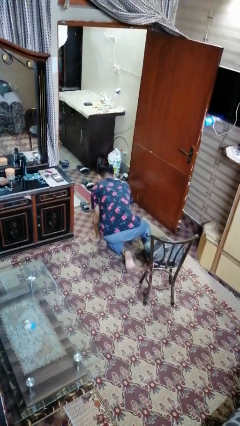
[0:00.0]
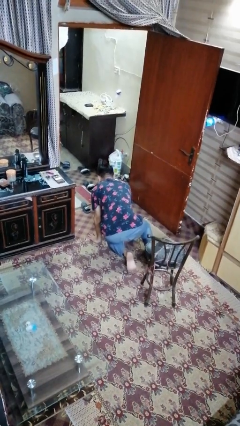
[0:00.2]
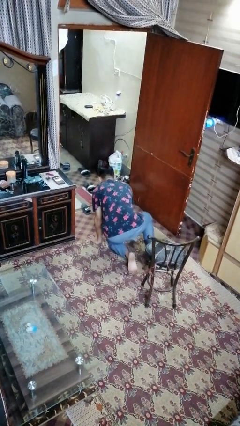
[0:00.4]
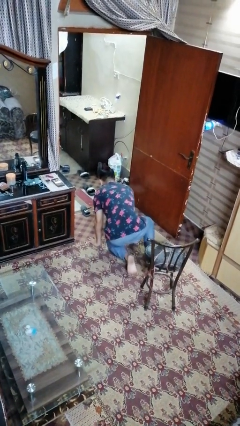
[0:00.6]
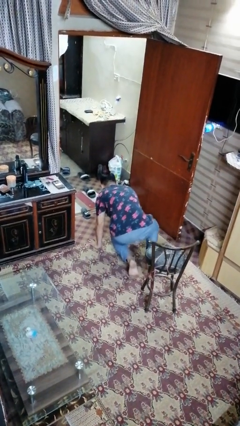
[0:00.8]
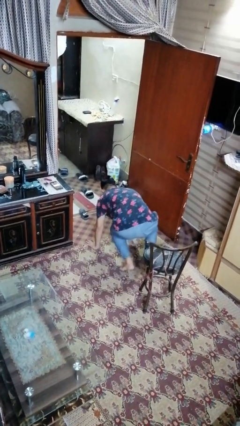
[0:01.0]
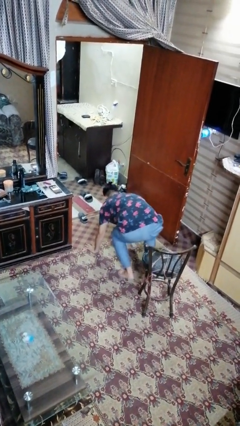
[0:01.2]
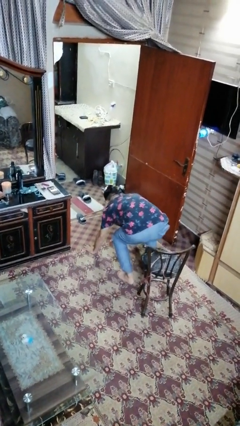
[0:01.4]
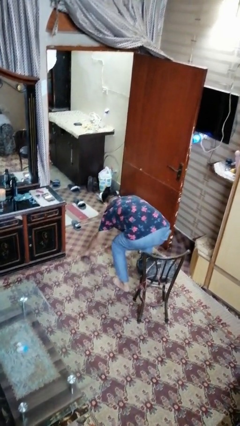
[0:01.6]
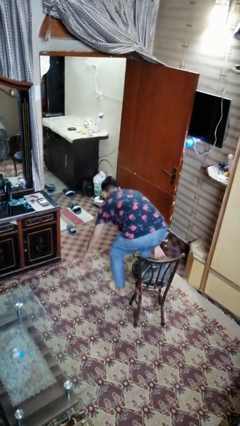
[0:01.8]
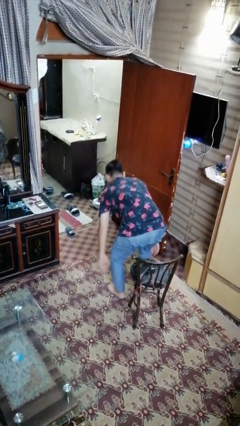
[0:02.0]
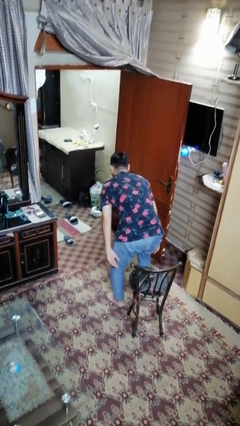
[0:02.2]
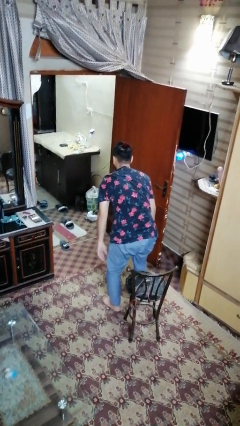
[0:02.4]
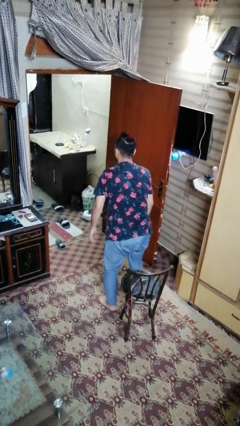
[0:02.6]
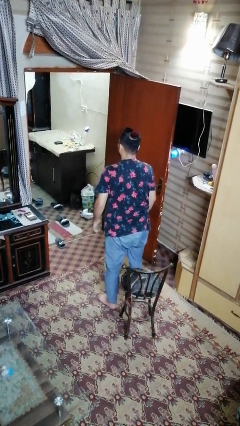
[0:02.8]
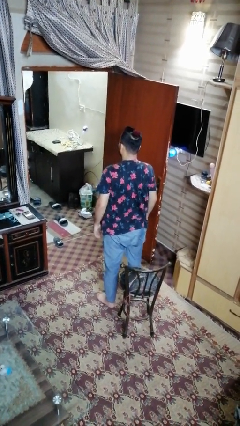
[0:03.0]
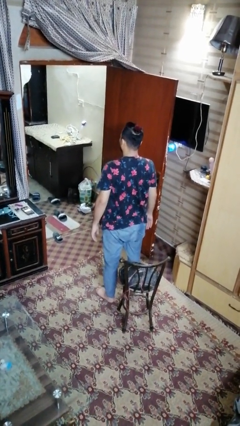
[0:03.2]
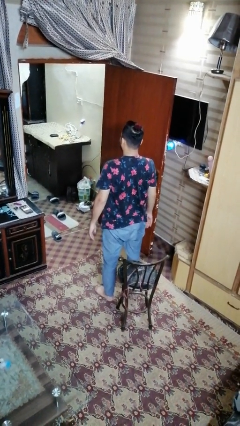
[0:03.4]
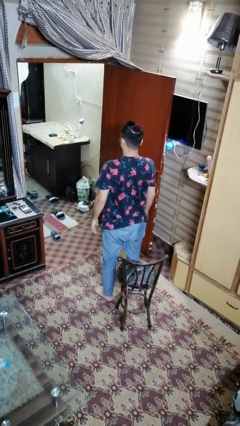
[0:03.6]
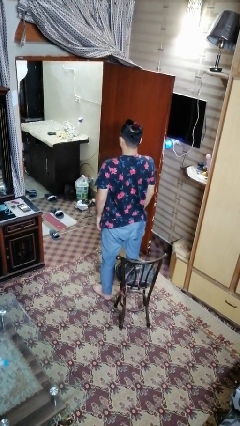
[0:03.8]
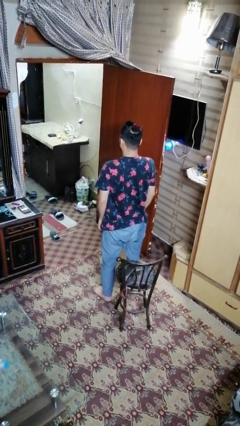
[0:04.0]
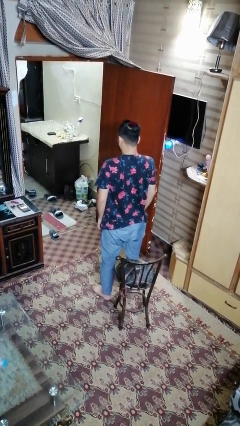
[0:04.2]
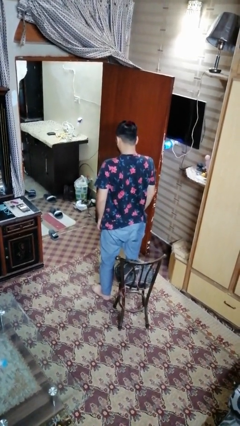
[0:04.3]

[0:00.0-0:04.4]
person stands up from floor

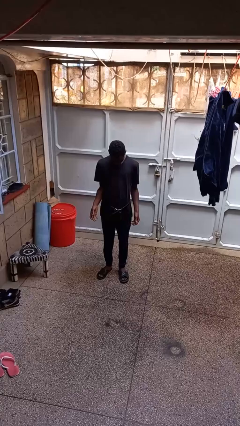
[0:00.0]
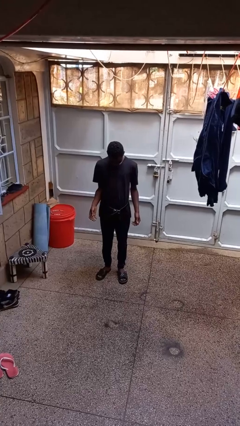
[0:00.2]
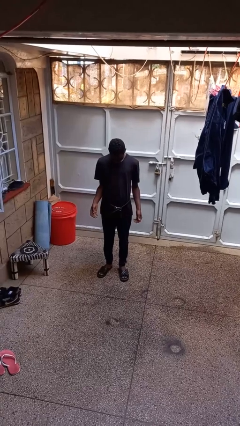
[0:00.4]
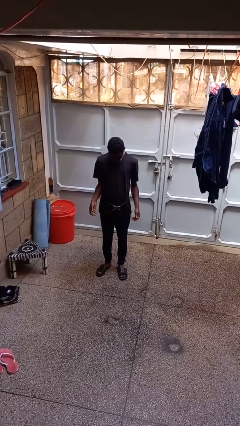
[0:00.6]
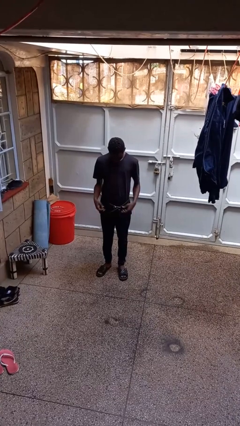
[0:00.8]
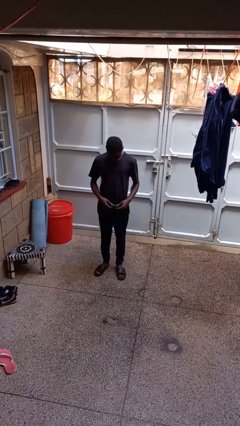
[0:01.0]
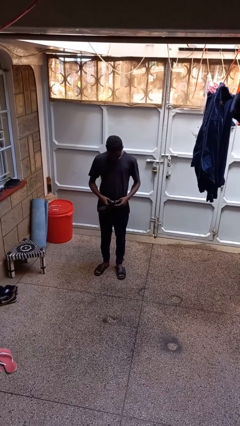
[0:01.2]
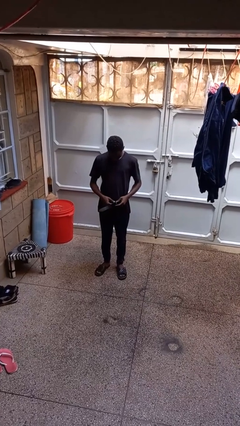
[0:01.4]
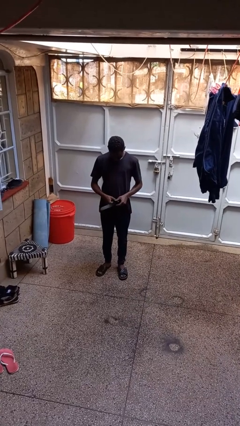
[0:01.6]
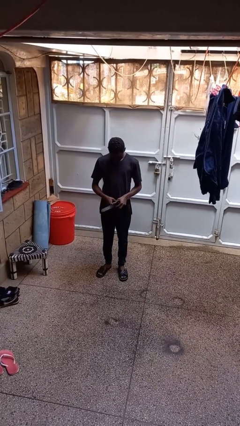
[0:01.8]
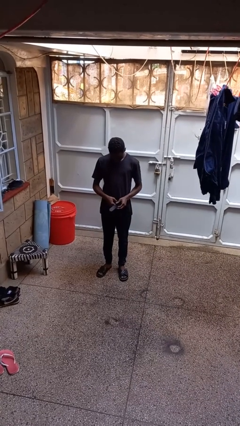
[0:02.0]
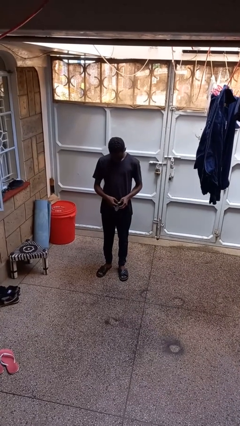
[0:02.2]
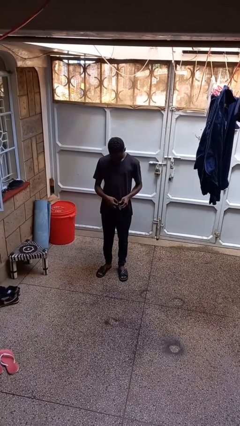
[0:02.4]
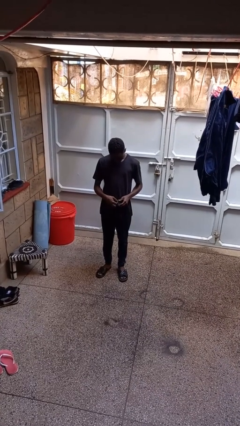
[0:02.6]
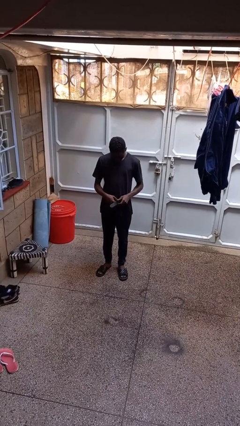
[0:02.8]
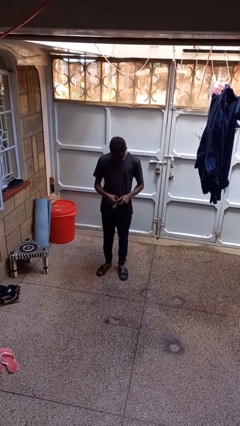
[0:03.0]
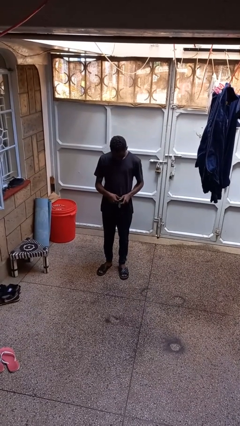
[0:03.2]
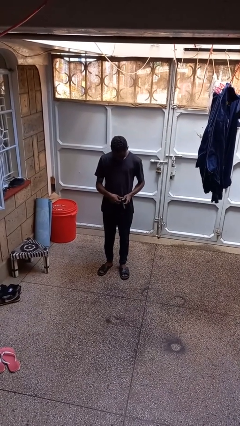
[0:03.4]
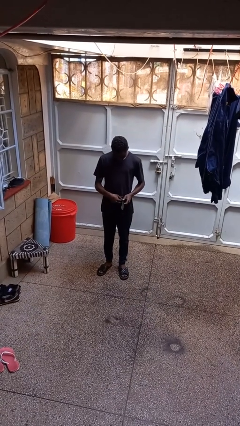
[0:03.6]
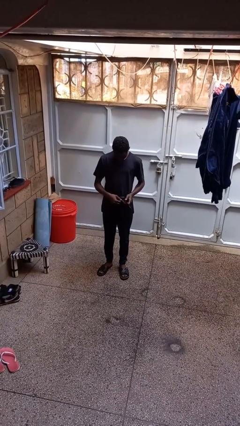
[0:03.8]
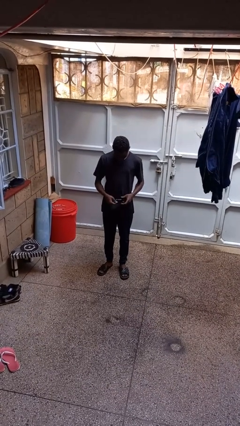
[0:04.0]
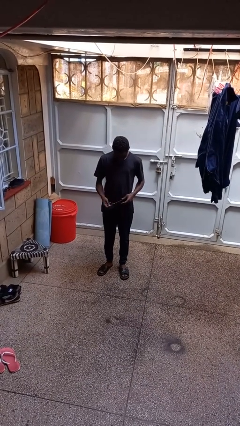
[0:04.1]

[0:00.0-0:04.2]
person takes off belt

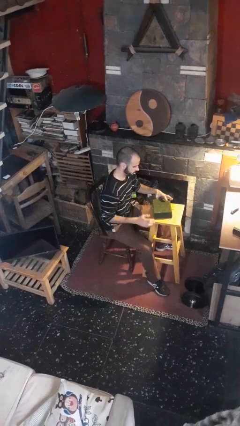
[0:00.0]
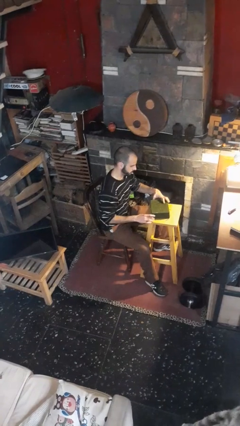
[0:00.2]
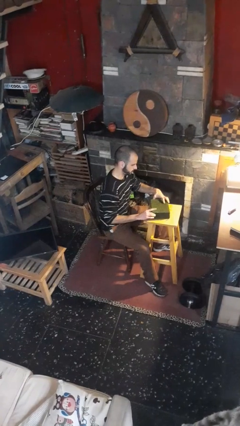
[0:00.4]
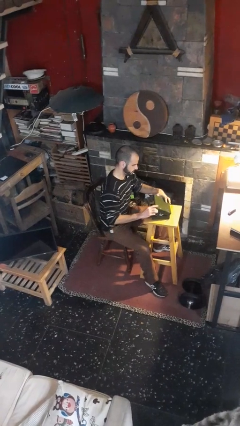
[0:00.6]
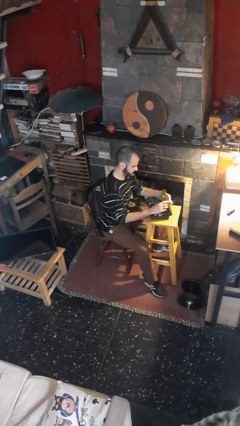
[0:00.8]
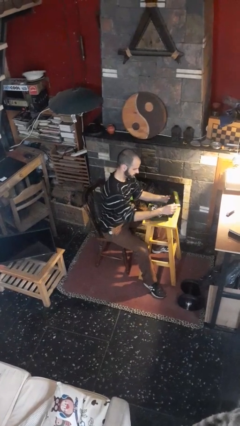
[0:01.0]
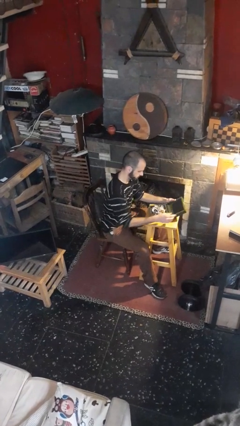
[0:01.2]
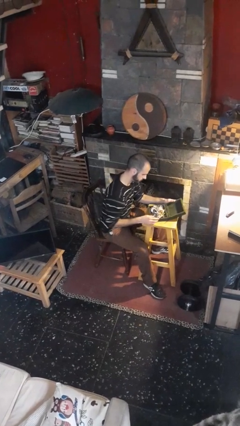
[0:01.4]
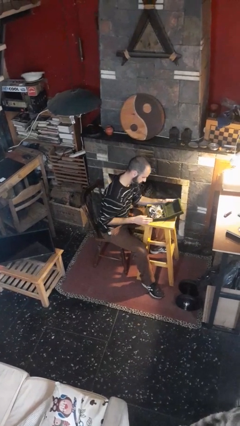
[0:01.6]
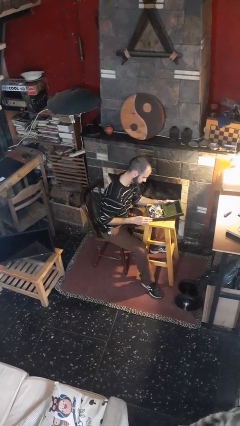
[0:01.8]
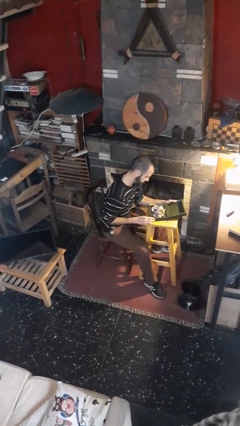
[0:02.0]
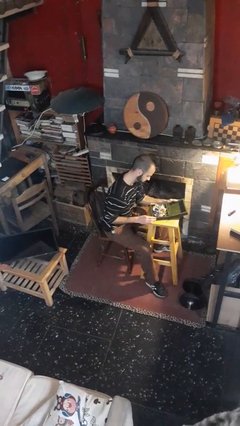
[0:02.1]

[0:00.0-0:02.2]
person opens jewelry box

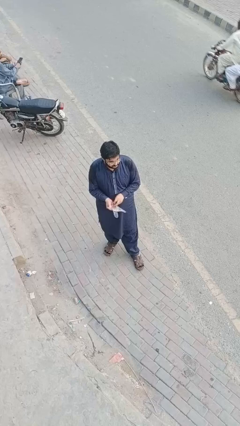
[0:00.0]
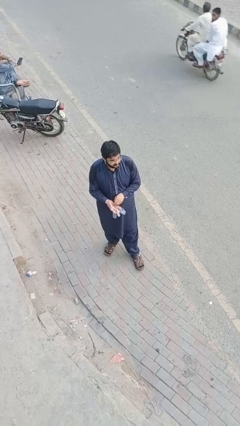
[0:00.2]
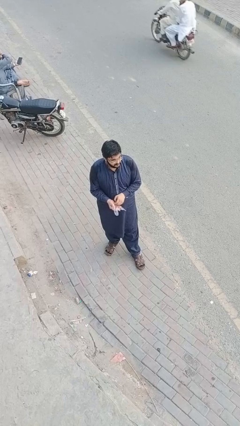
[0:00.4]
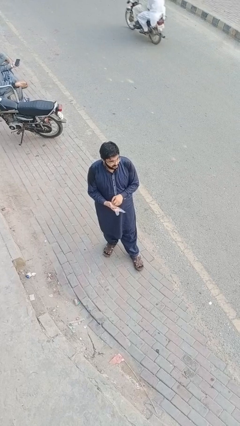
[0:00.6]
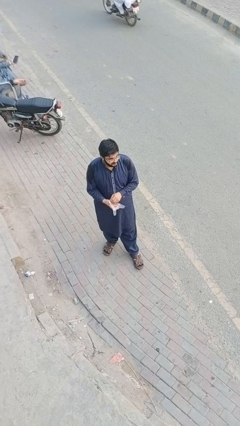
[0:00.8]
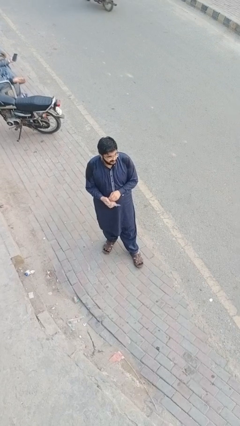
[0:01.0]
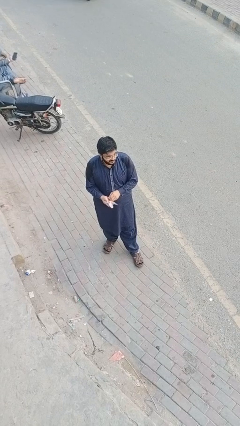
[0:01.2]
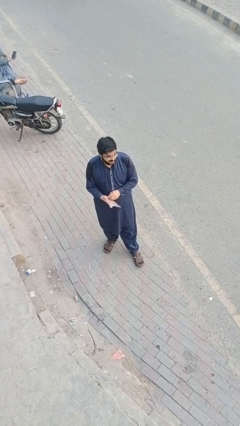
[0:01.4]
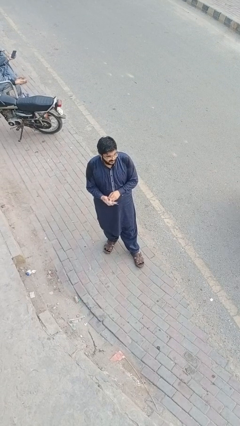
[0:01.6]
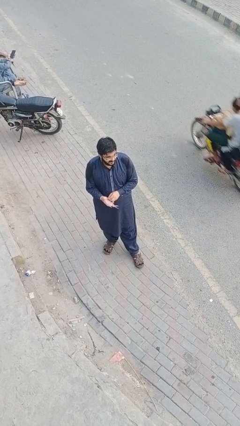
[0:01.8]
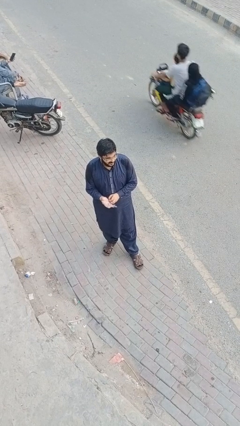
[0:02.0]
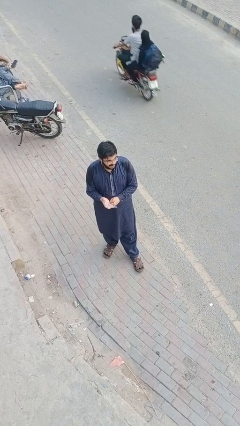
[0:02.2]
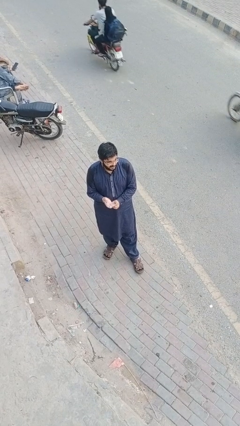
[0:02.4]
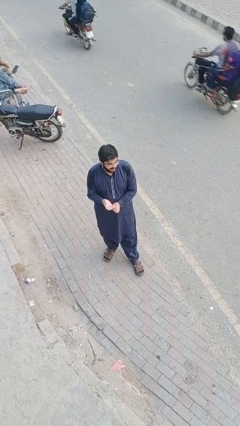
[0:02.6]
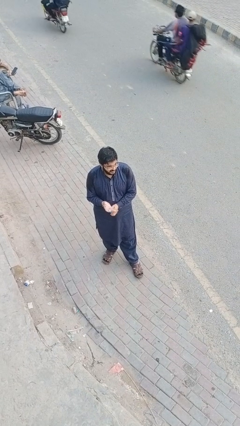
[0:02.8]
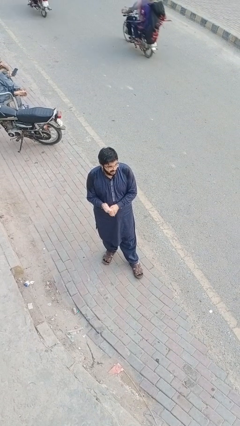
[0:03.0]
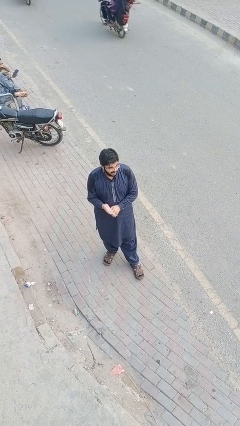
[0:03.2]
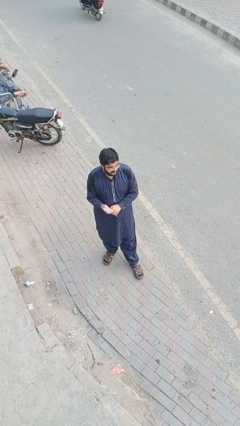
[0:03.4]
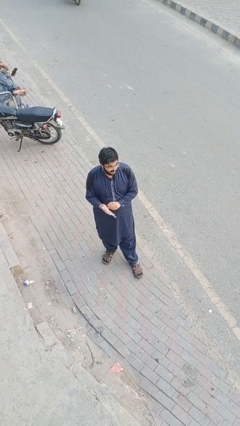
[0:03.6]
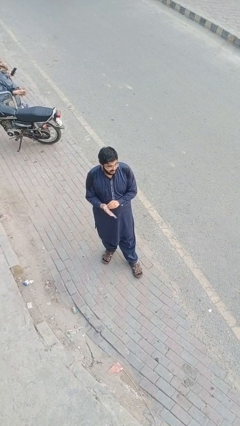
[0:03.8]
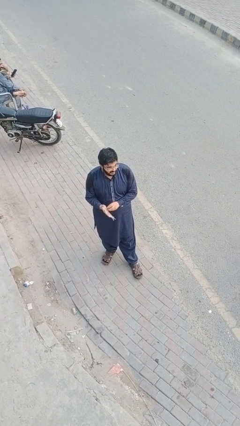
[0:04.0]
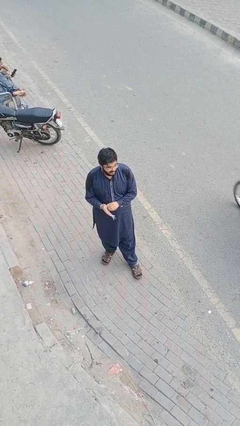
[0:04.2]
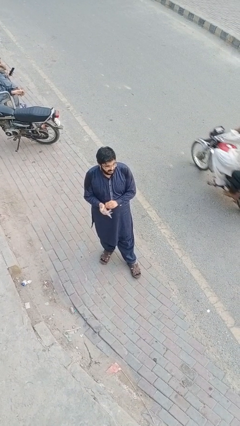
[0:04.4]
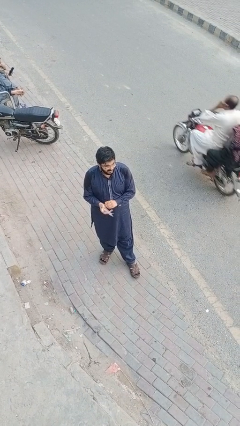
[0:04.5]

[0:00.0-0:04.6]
person puts on gloves

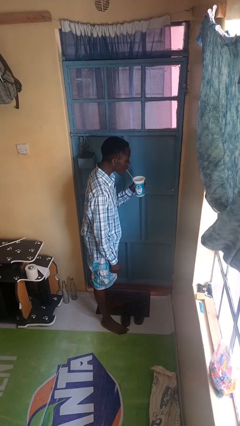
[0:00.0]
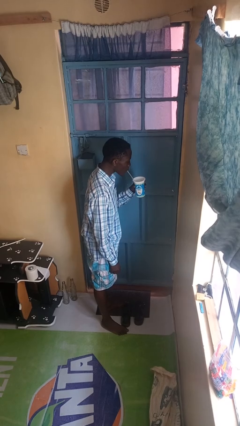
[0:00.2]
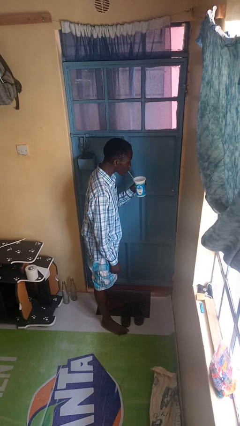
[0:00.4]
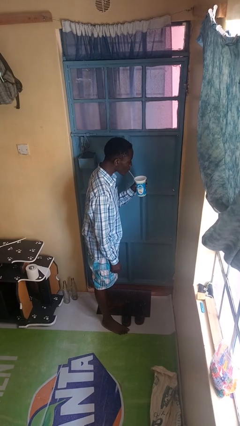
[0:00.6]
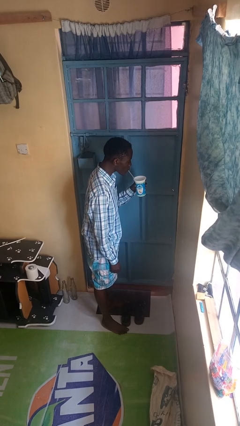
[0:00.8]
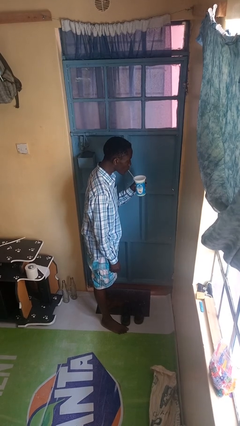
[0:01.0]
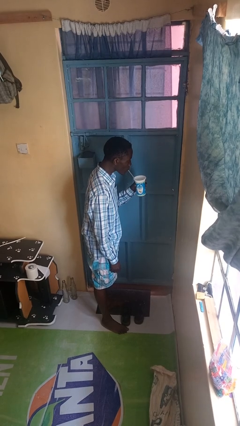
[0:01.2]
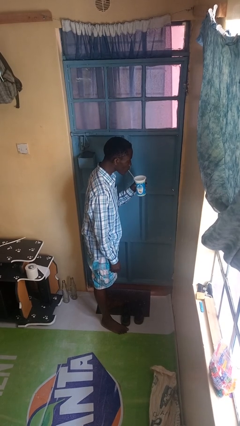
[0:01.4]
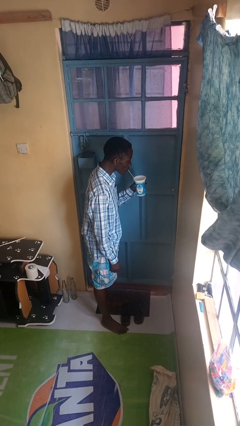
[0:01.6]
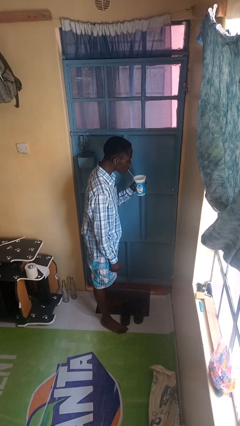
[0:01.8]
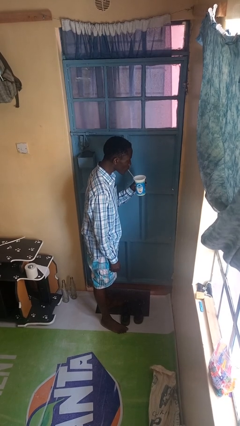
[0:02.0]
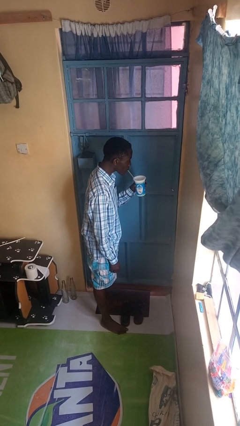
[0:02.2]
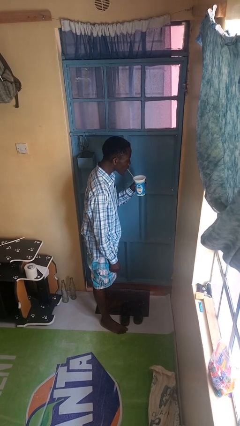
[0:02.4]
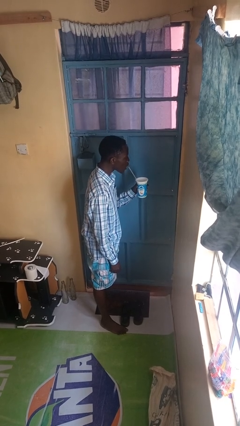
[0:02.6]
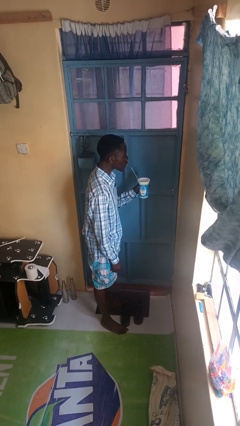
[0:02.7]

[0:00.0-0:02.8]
person drinks from straw
